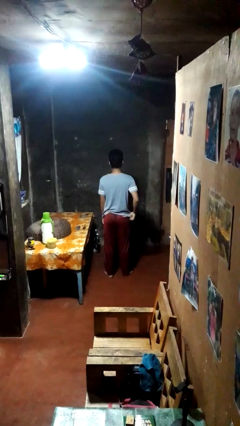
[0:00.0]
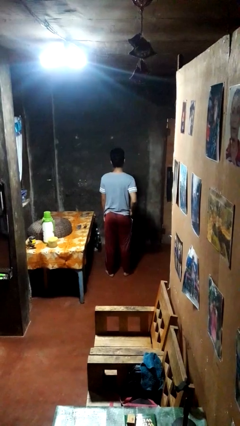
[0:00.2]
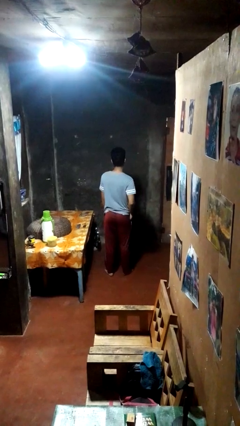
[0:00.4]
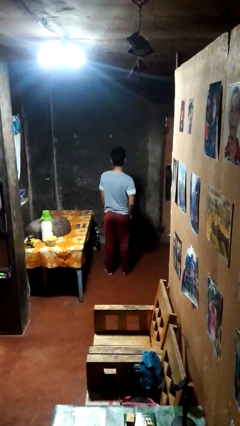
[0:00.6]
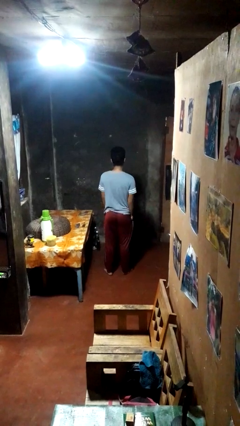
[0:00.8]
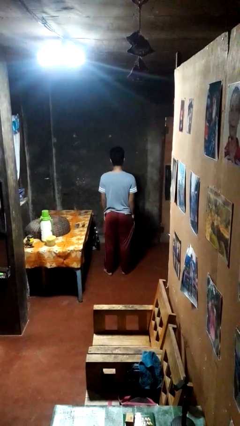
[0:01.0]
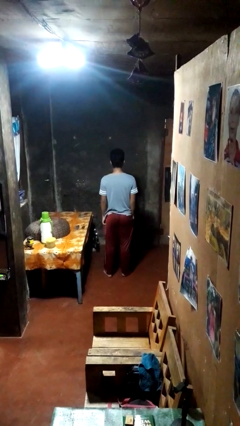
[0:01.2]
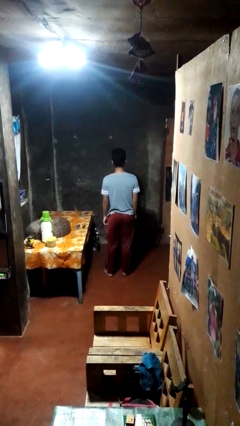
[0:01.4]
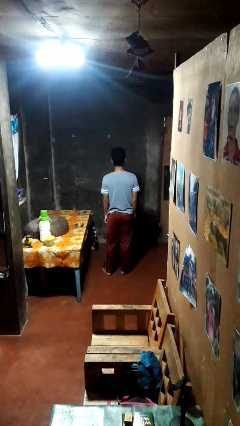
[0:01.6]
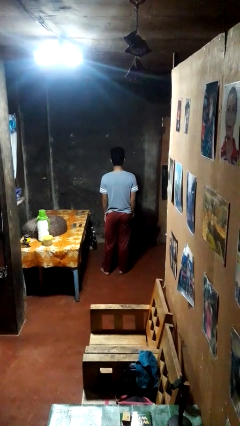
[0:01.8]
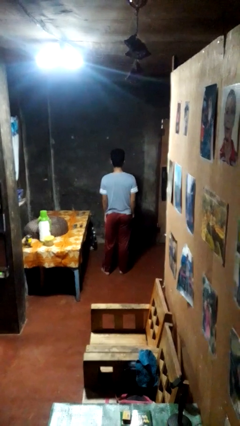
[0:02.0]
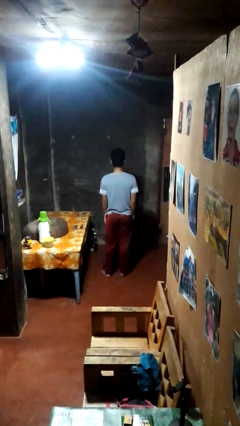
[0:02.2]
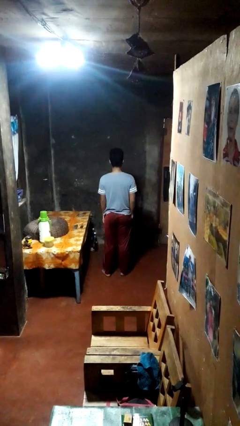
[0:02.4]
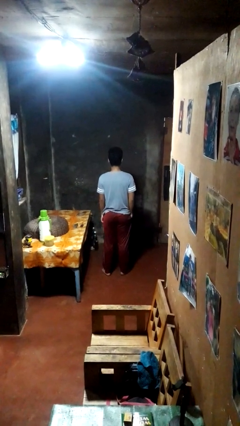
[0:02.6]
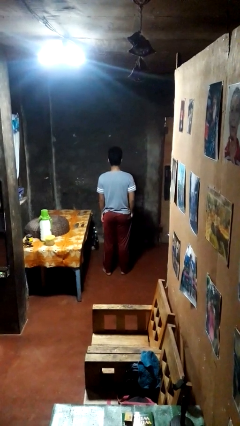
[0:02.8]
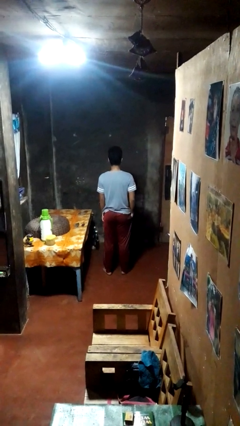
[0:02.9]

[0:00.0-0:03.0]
person puts hands in back pockets

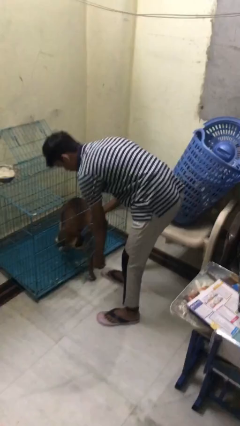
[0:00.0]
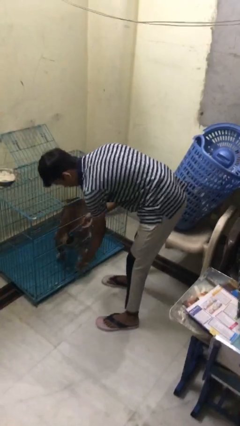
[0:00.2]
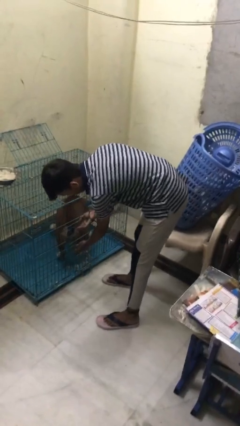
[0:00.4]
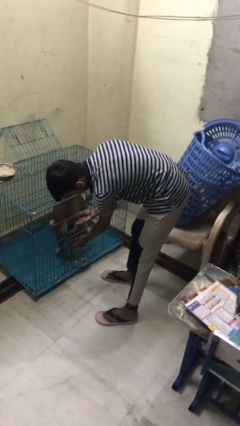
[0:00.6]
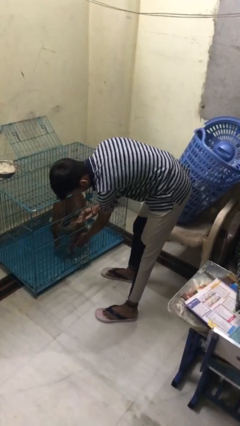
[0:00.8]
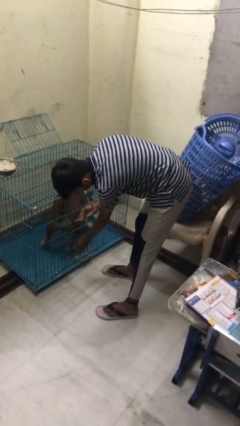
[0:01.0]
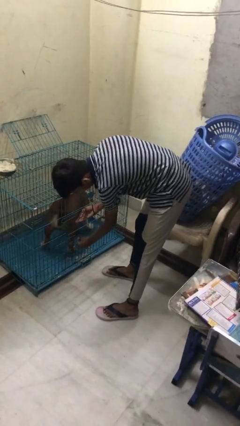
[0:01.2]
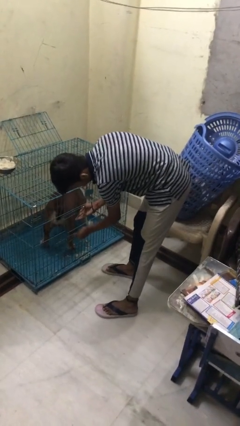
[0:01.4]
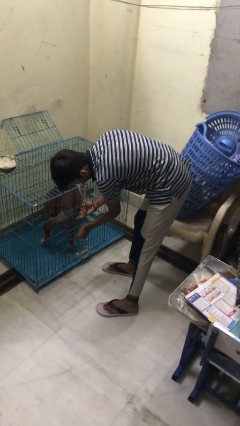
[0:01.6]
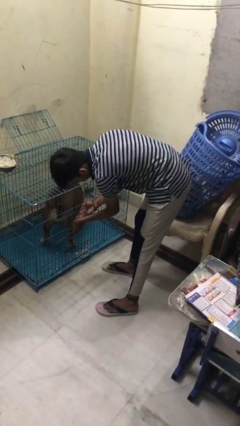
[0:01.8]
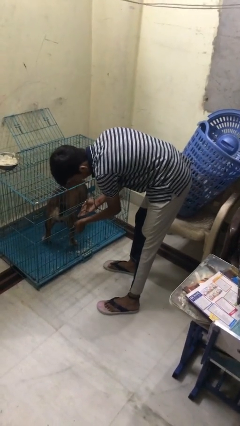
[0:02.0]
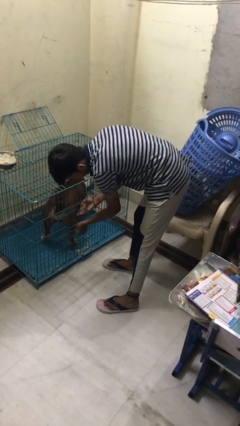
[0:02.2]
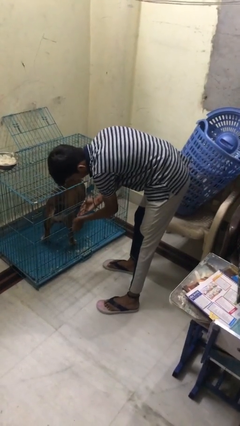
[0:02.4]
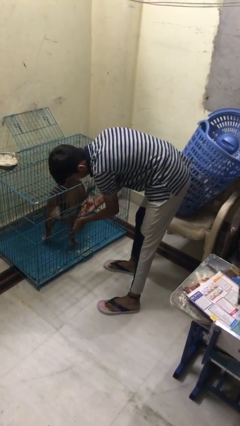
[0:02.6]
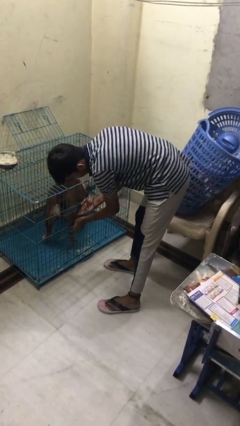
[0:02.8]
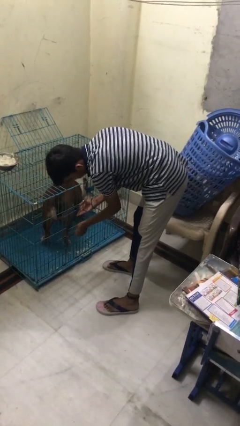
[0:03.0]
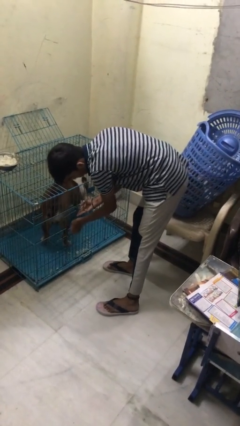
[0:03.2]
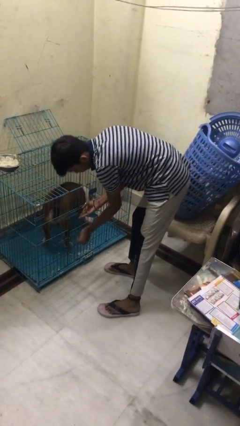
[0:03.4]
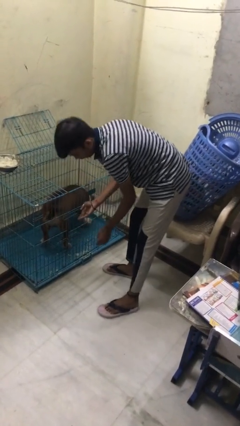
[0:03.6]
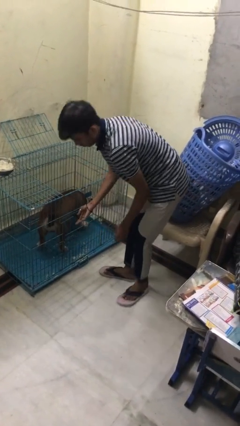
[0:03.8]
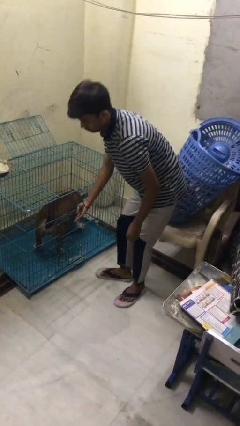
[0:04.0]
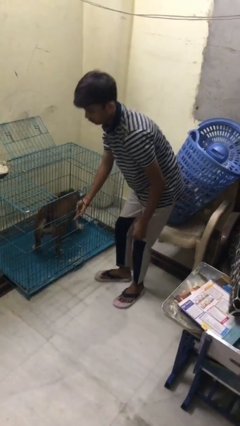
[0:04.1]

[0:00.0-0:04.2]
person crates dog

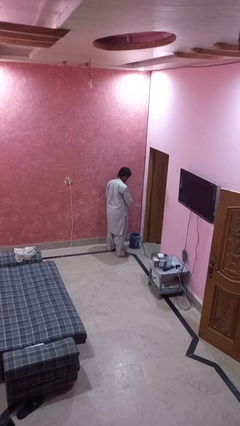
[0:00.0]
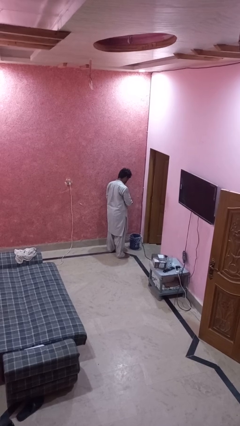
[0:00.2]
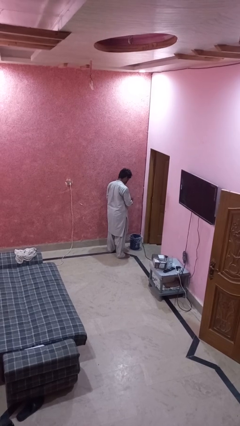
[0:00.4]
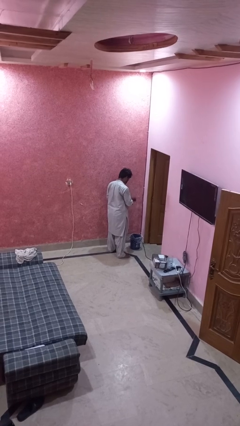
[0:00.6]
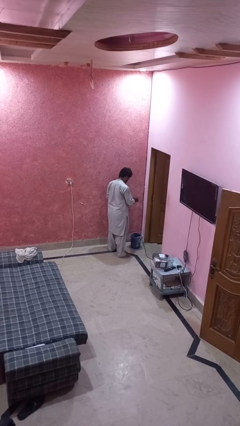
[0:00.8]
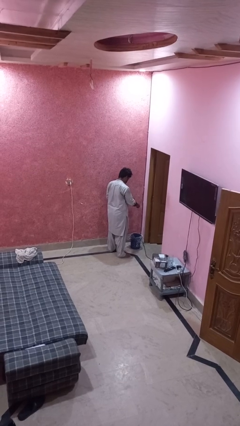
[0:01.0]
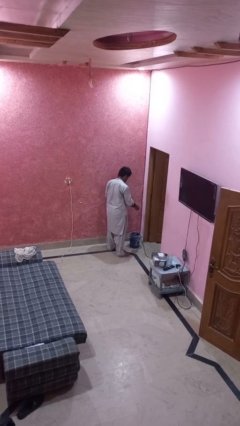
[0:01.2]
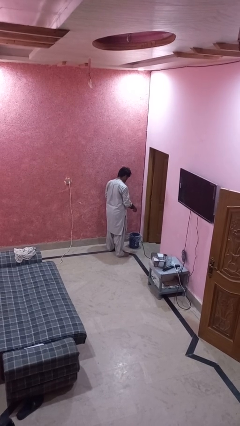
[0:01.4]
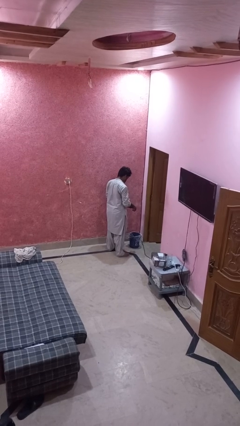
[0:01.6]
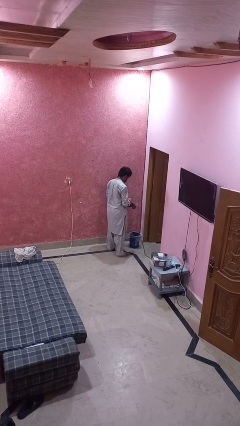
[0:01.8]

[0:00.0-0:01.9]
person discards trash

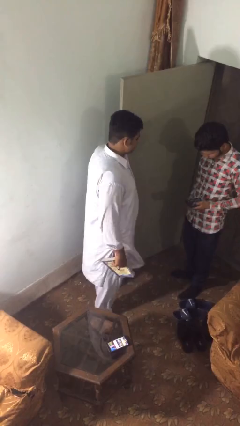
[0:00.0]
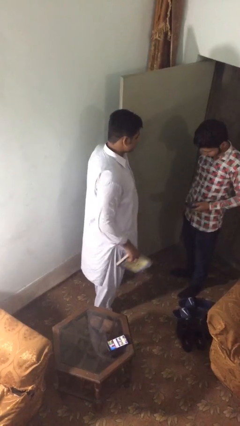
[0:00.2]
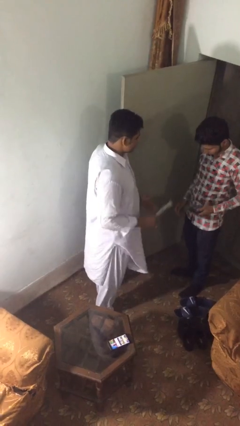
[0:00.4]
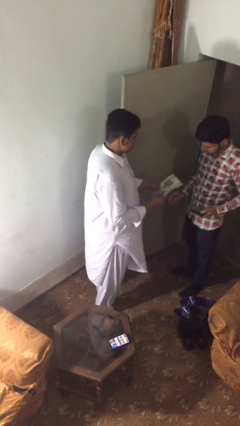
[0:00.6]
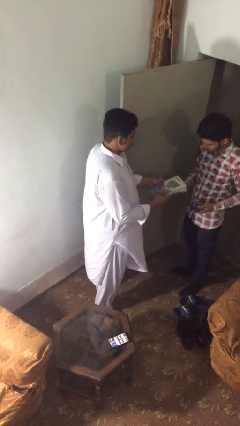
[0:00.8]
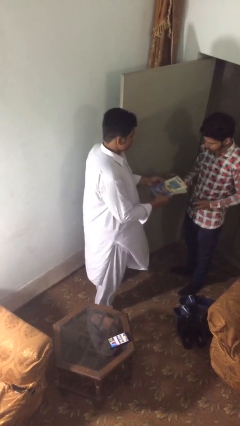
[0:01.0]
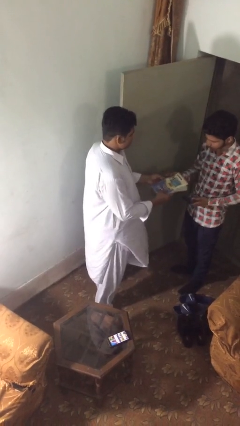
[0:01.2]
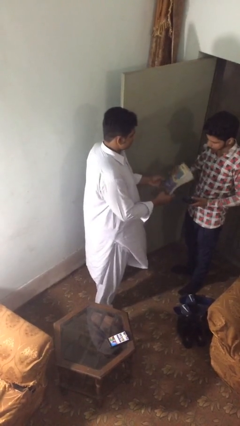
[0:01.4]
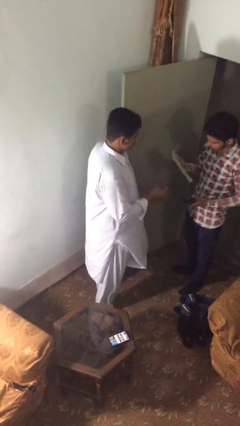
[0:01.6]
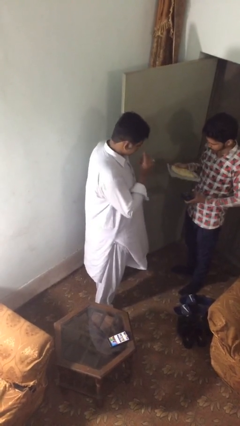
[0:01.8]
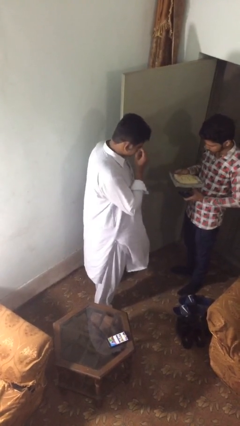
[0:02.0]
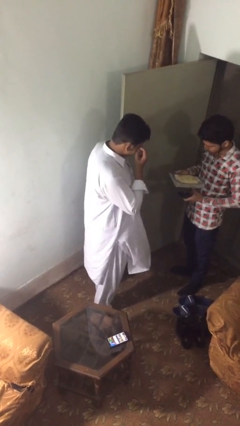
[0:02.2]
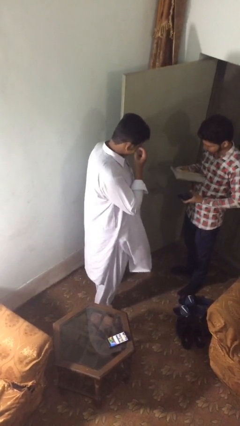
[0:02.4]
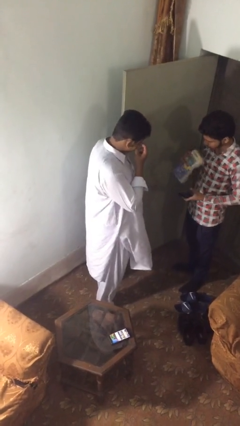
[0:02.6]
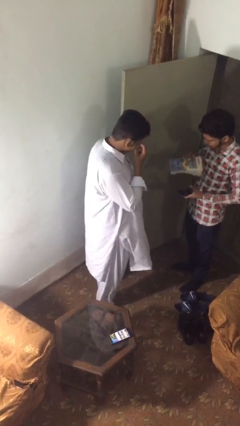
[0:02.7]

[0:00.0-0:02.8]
person transfers object to person

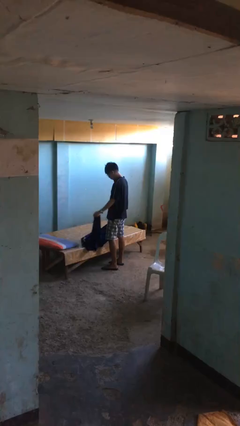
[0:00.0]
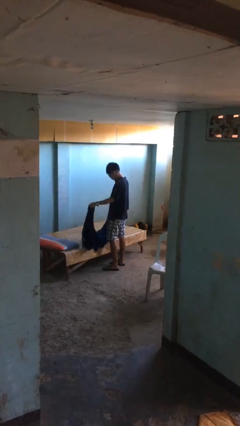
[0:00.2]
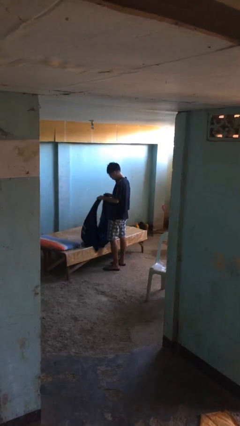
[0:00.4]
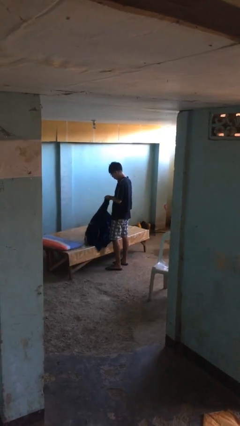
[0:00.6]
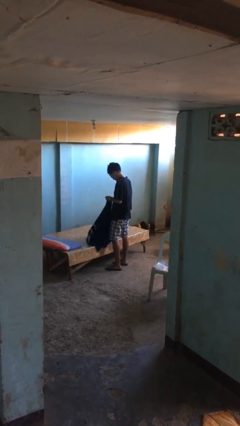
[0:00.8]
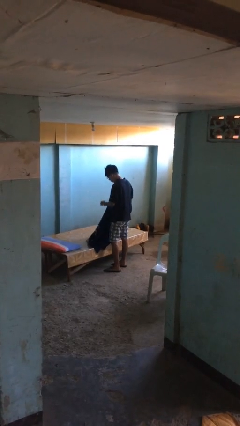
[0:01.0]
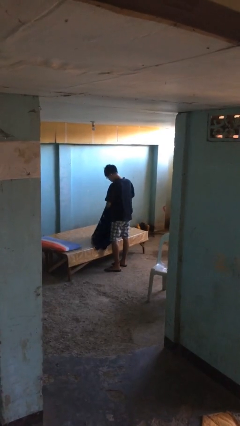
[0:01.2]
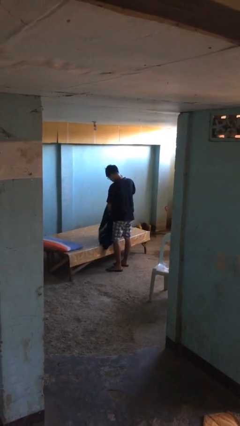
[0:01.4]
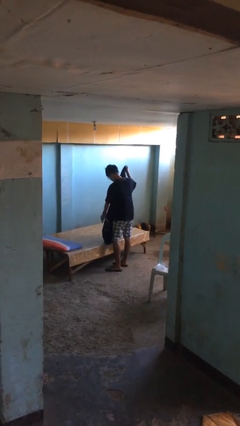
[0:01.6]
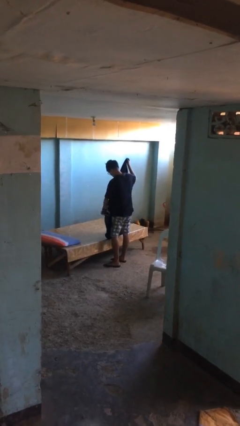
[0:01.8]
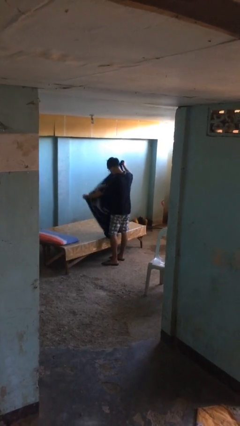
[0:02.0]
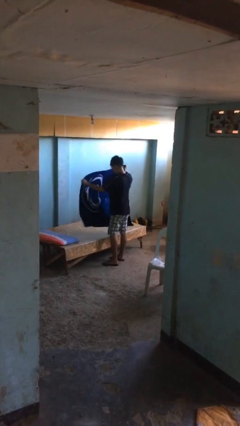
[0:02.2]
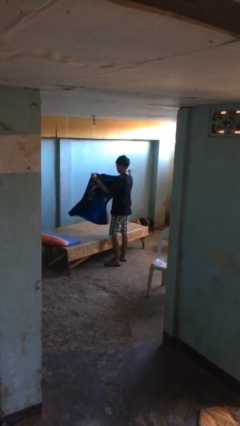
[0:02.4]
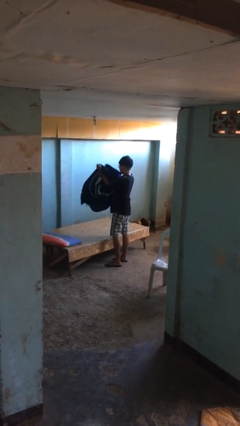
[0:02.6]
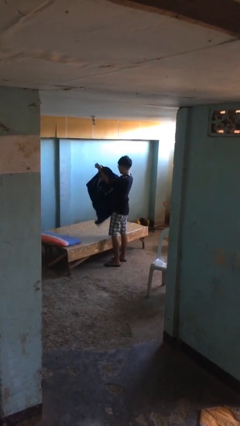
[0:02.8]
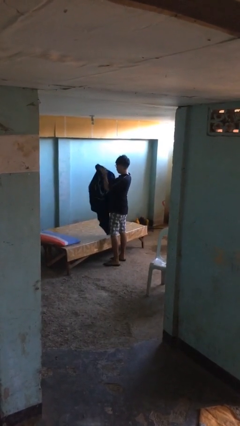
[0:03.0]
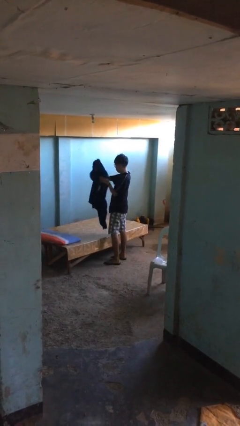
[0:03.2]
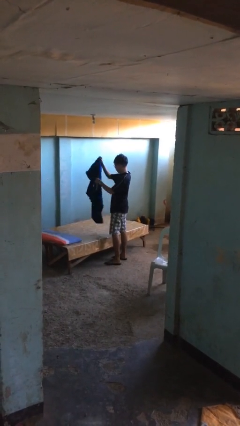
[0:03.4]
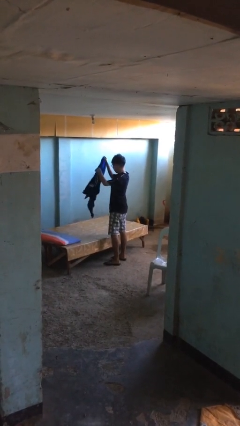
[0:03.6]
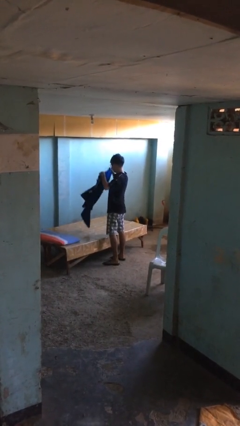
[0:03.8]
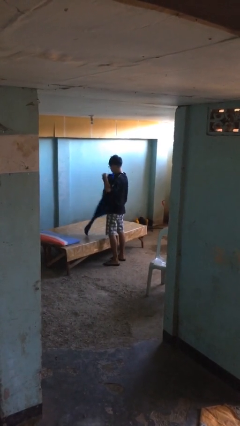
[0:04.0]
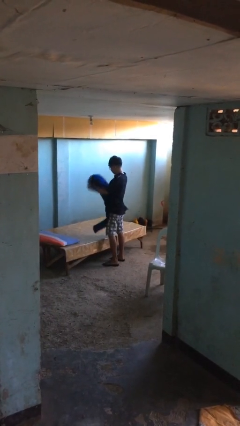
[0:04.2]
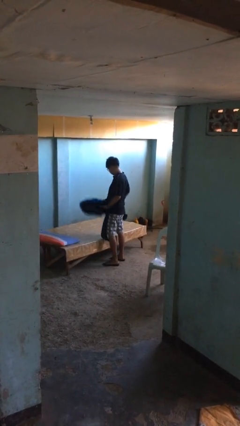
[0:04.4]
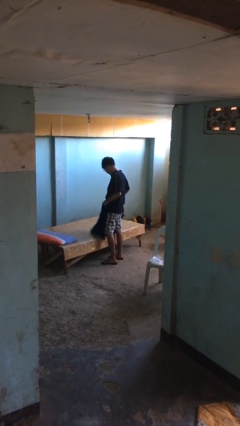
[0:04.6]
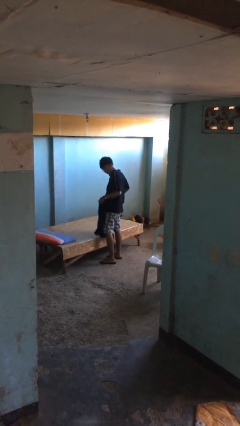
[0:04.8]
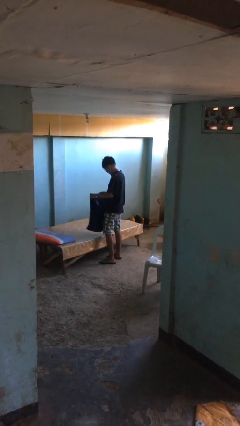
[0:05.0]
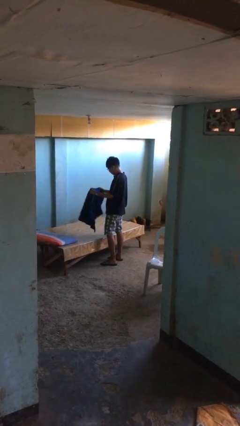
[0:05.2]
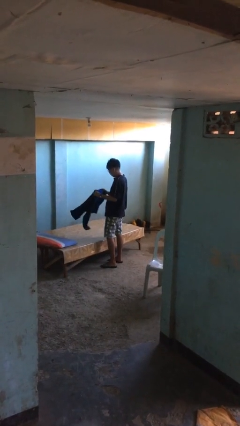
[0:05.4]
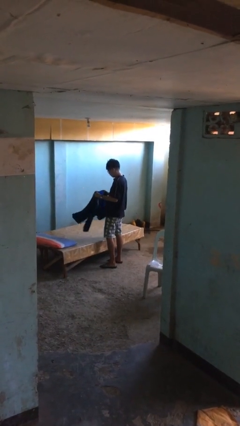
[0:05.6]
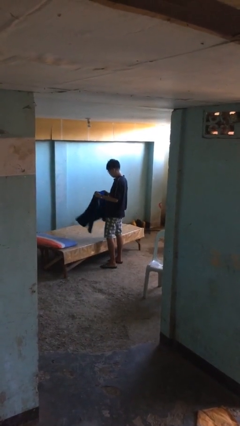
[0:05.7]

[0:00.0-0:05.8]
person folds blanket
